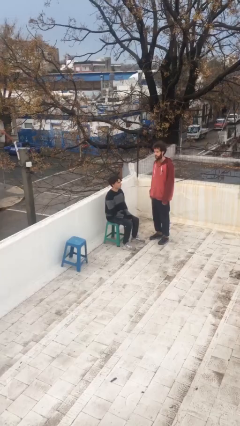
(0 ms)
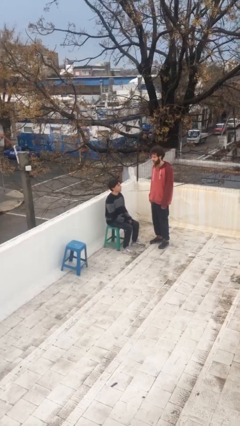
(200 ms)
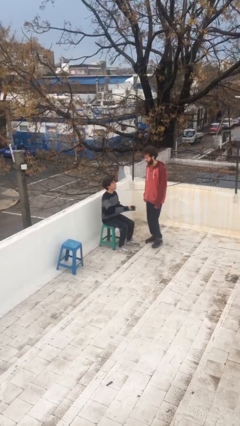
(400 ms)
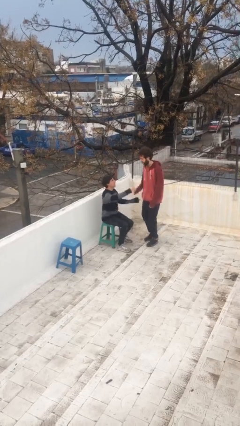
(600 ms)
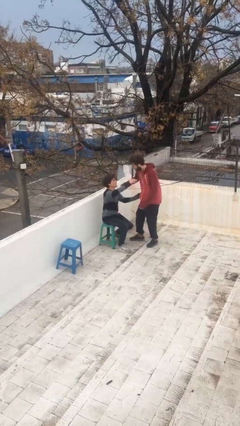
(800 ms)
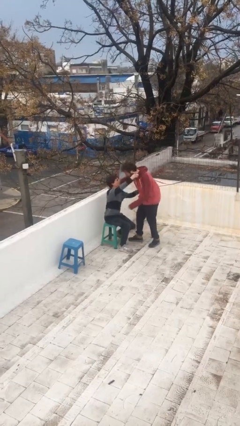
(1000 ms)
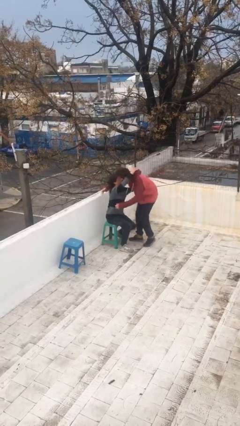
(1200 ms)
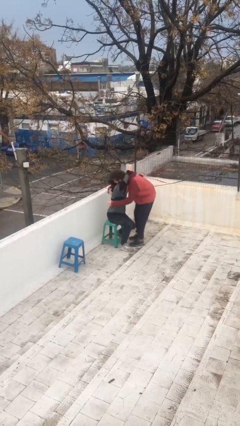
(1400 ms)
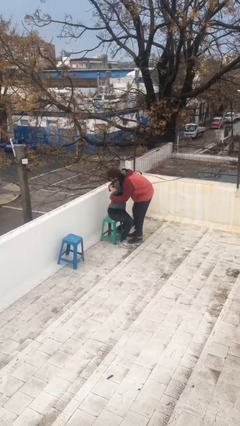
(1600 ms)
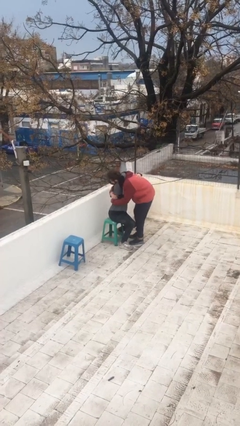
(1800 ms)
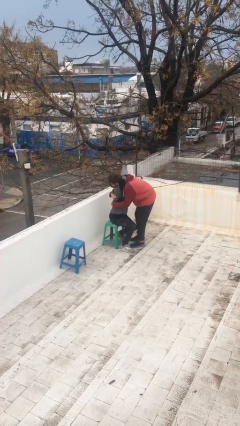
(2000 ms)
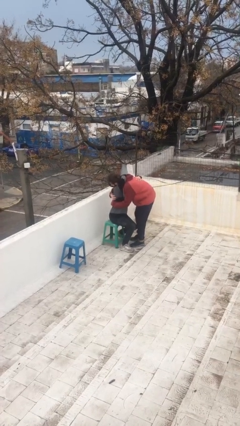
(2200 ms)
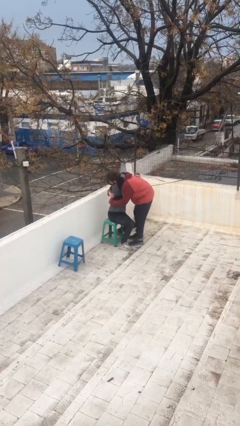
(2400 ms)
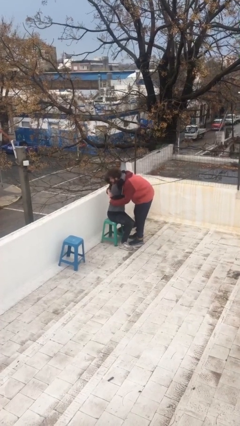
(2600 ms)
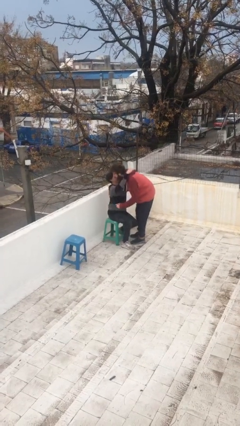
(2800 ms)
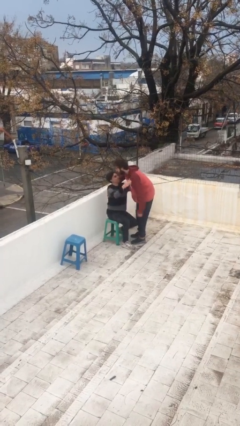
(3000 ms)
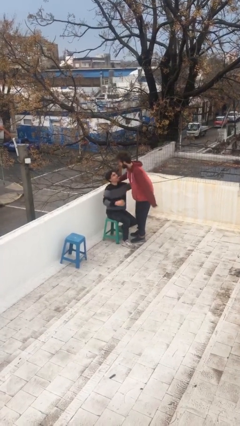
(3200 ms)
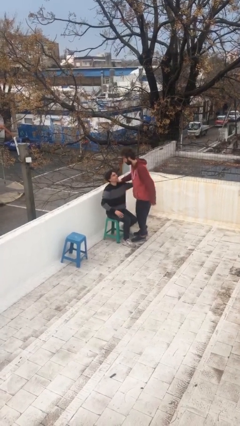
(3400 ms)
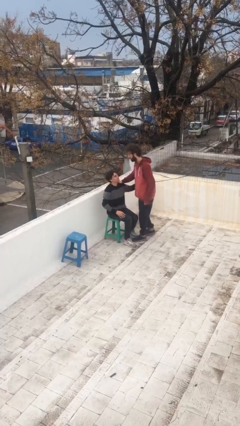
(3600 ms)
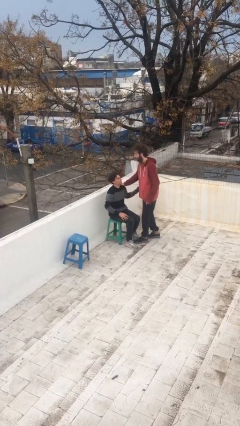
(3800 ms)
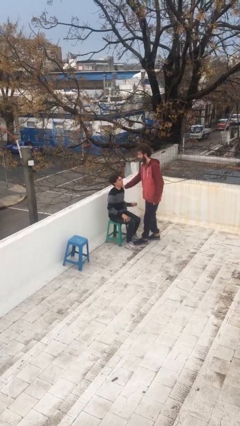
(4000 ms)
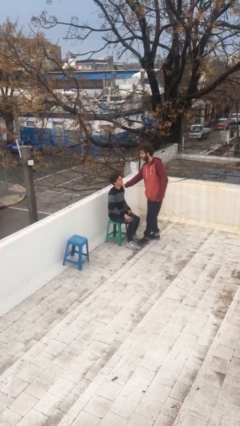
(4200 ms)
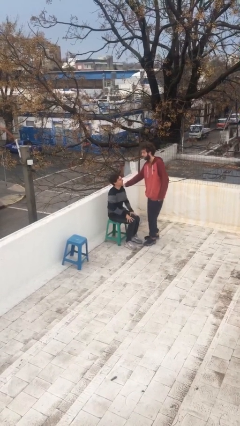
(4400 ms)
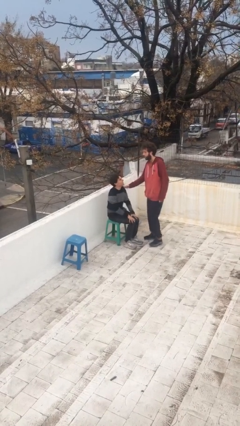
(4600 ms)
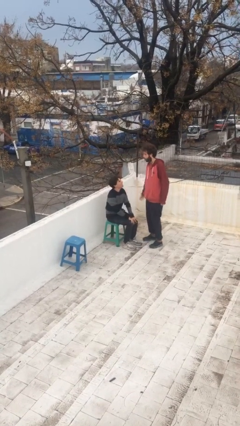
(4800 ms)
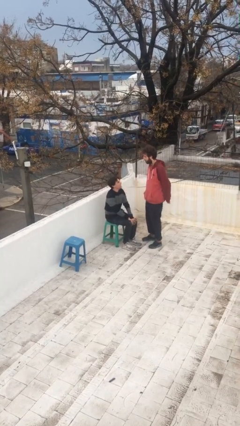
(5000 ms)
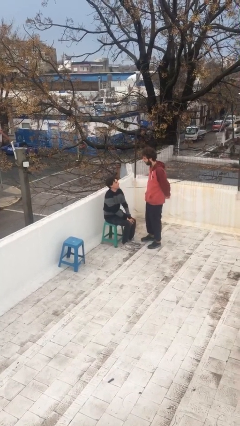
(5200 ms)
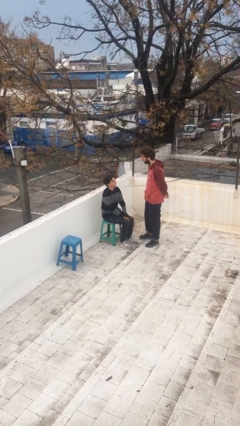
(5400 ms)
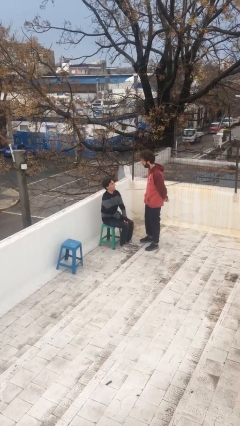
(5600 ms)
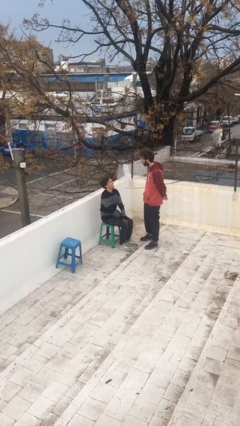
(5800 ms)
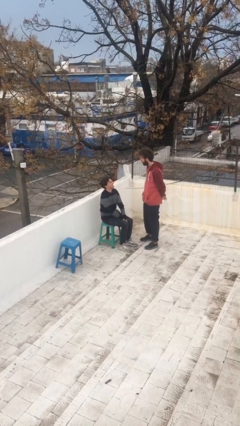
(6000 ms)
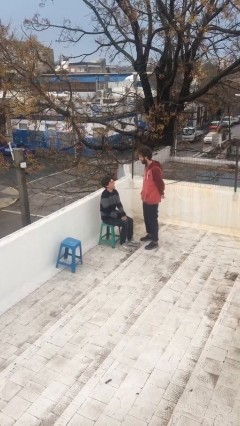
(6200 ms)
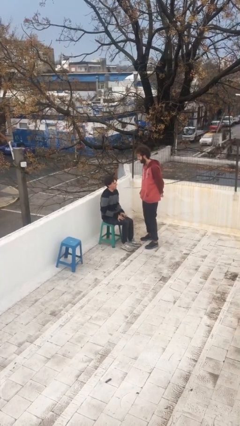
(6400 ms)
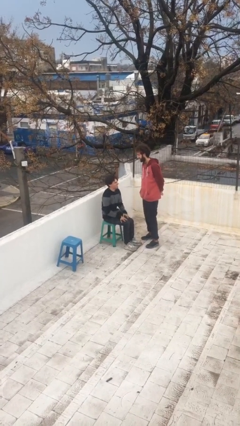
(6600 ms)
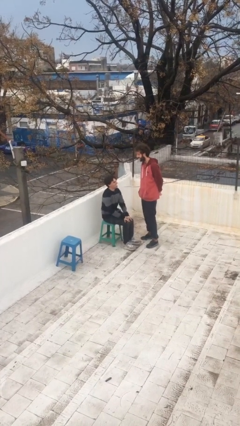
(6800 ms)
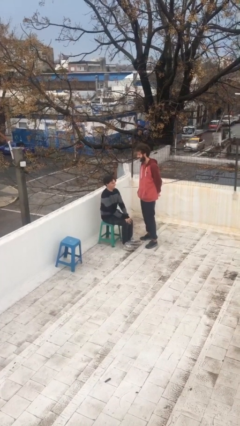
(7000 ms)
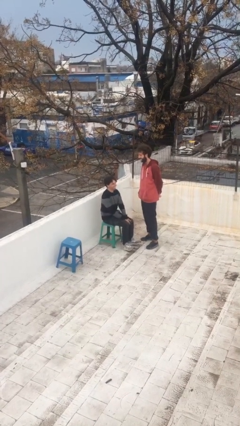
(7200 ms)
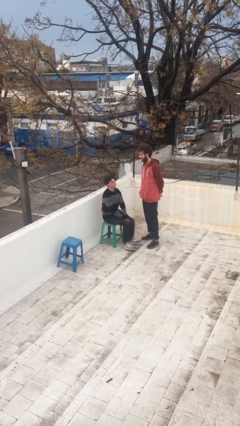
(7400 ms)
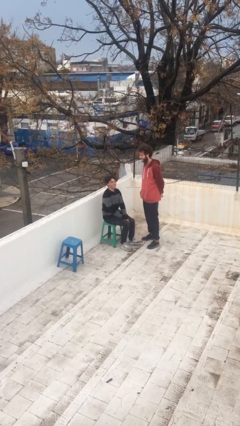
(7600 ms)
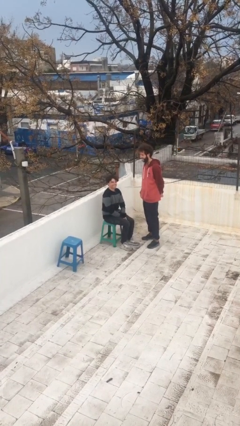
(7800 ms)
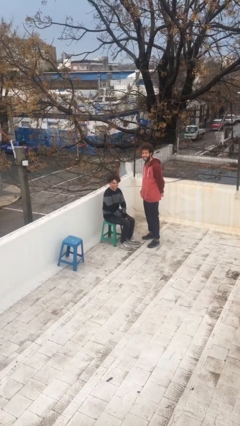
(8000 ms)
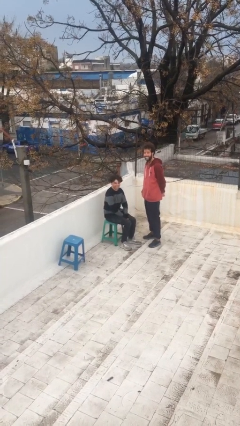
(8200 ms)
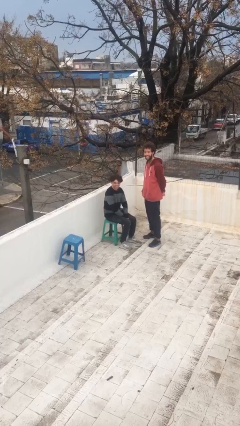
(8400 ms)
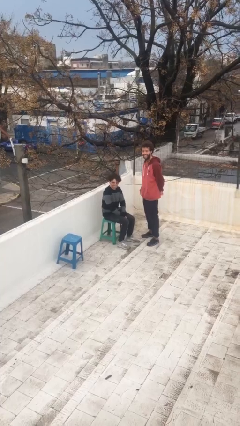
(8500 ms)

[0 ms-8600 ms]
person embraces person

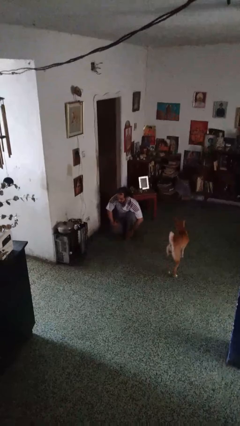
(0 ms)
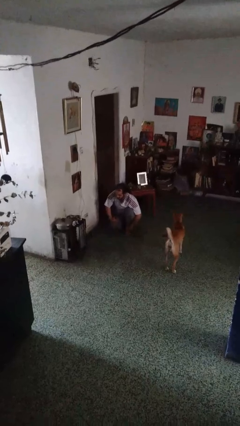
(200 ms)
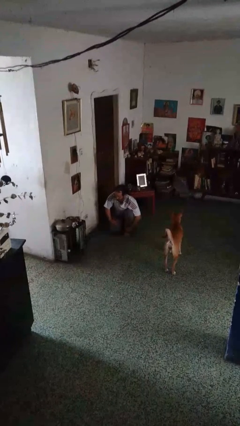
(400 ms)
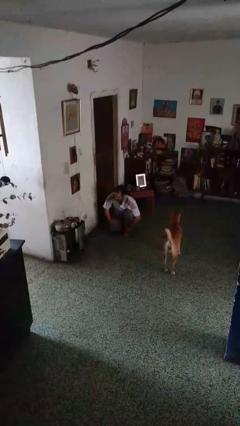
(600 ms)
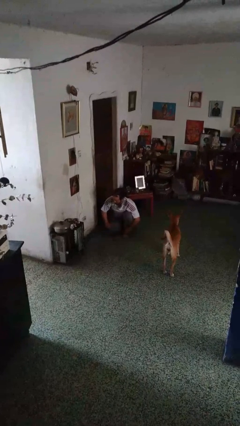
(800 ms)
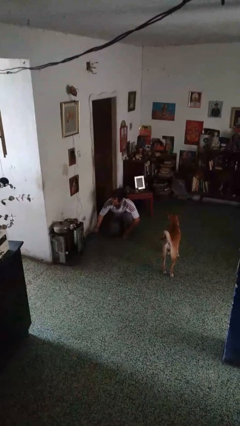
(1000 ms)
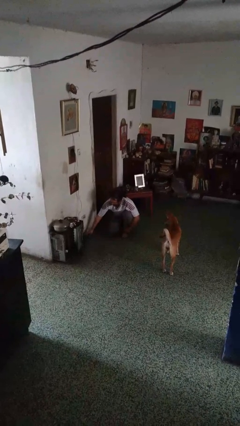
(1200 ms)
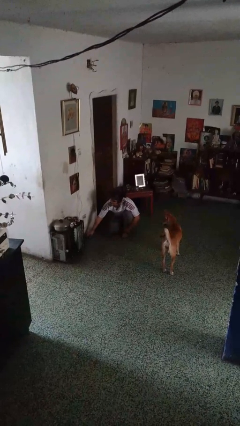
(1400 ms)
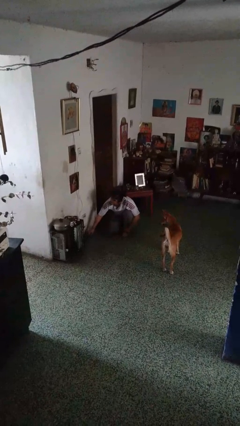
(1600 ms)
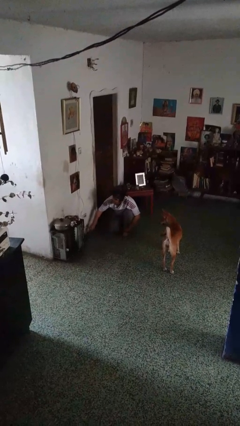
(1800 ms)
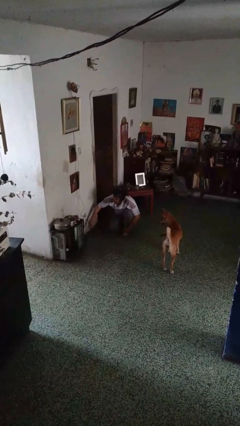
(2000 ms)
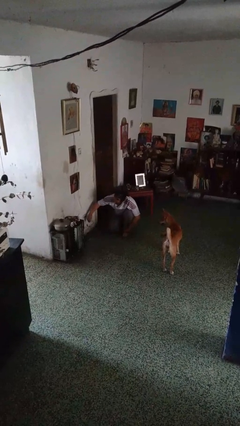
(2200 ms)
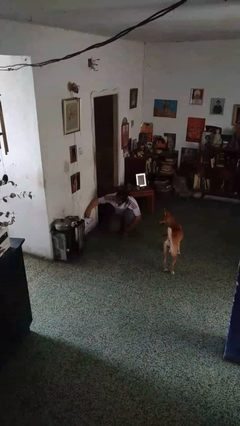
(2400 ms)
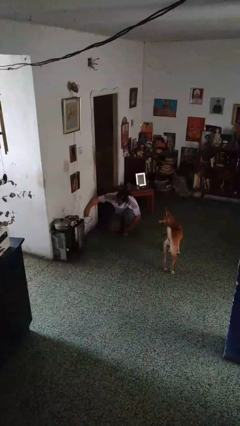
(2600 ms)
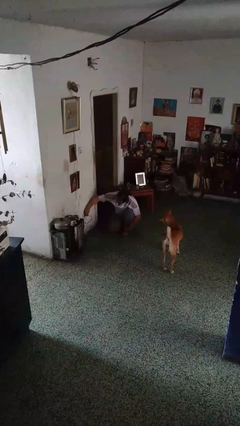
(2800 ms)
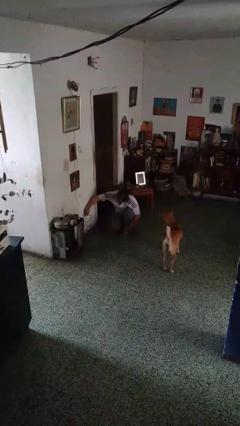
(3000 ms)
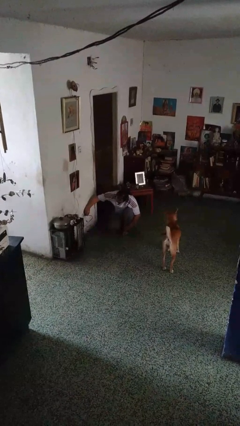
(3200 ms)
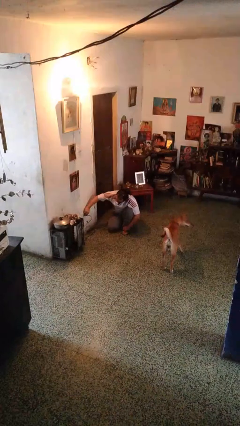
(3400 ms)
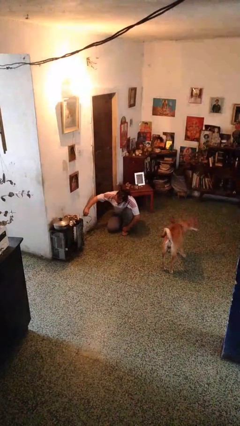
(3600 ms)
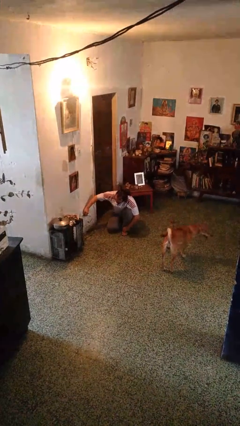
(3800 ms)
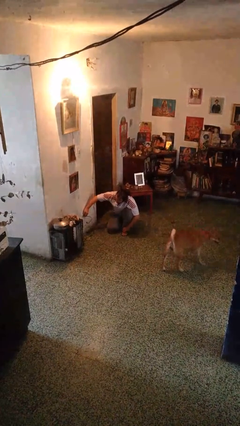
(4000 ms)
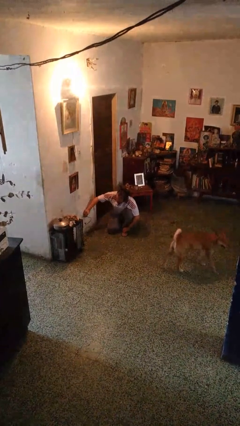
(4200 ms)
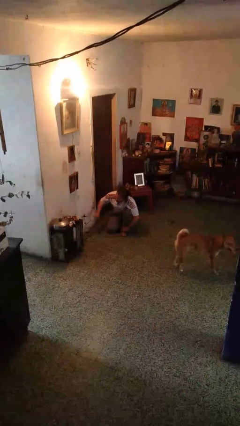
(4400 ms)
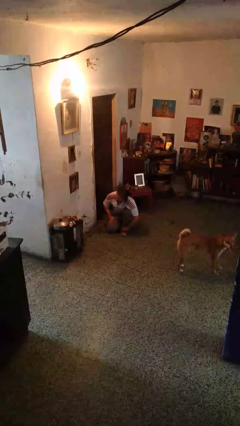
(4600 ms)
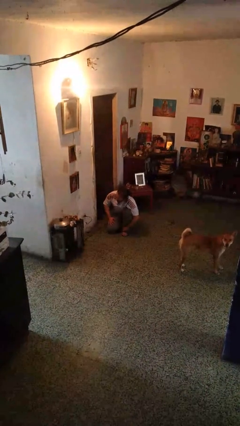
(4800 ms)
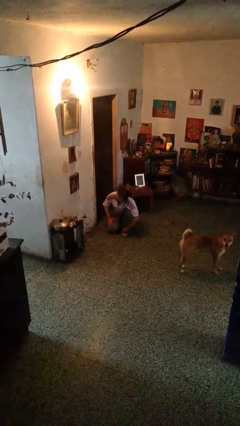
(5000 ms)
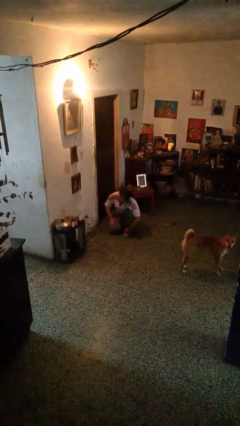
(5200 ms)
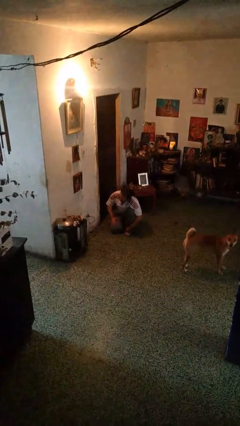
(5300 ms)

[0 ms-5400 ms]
person plugs into electrical socket

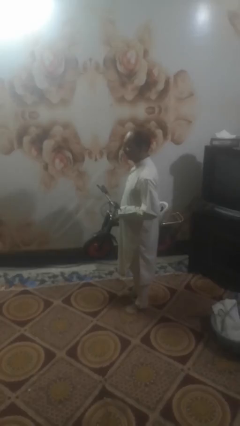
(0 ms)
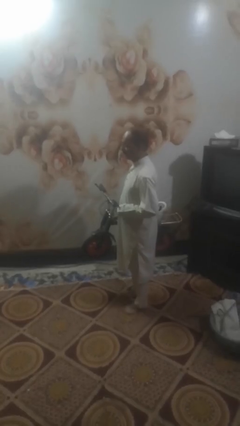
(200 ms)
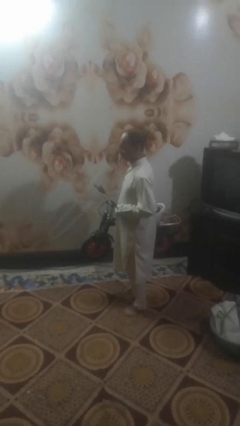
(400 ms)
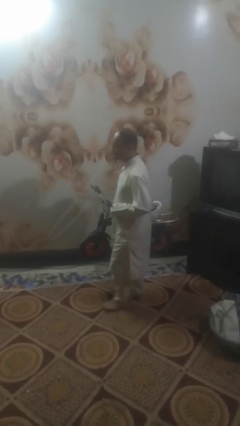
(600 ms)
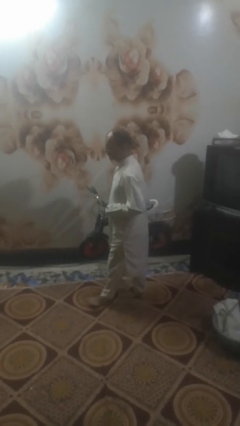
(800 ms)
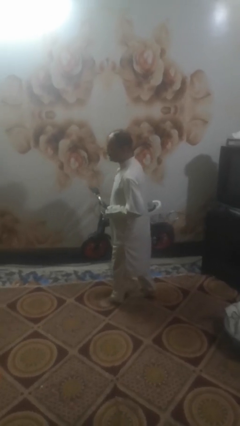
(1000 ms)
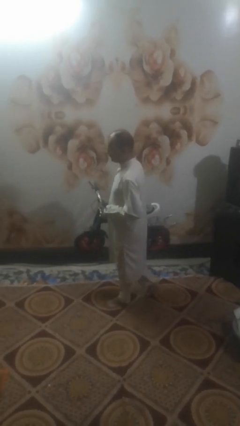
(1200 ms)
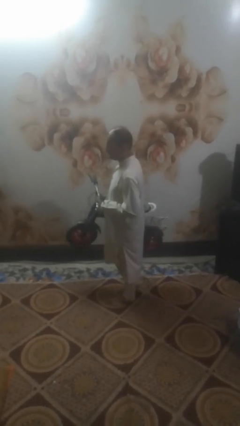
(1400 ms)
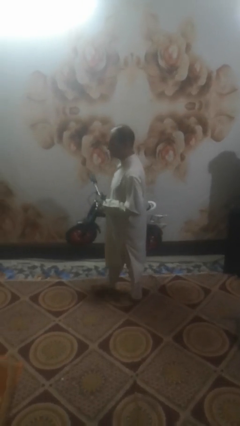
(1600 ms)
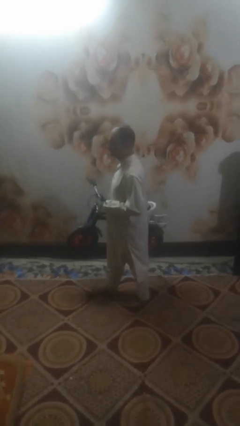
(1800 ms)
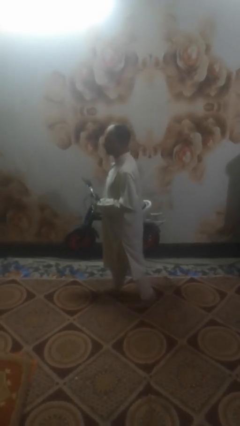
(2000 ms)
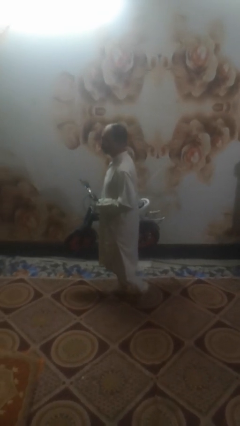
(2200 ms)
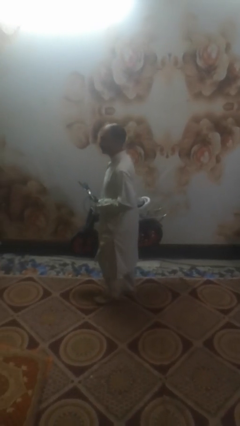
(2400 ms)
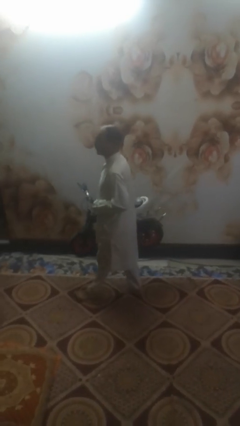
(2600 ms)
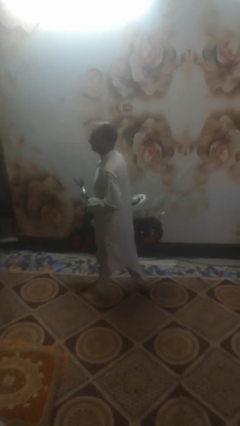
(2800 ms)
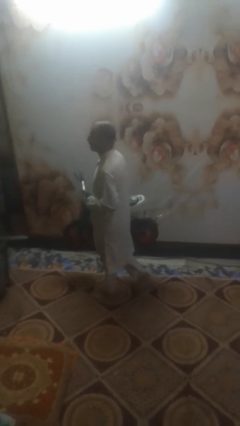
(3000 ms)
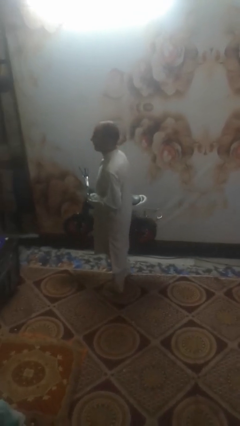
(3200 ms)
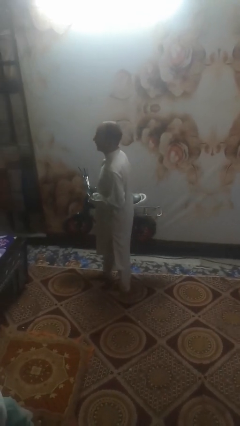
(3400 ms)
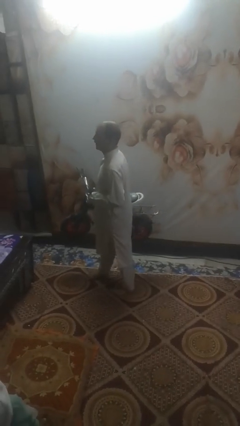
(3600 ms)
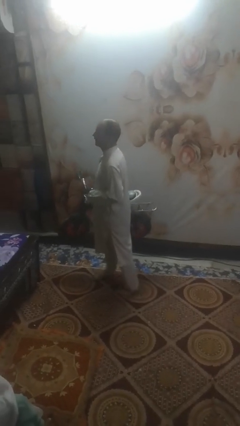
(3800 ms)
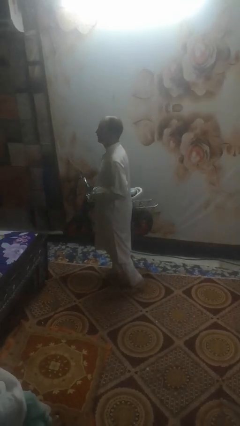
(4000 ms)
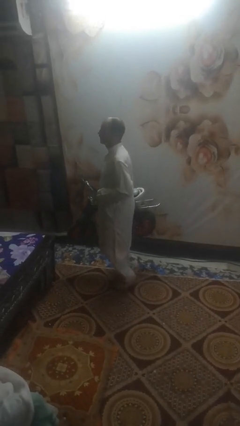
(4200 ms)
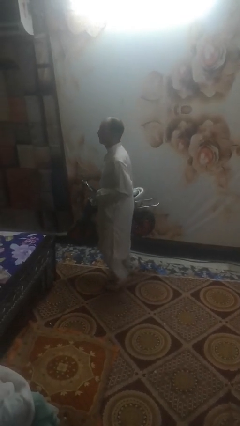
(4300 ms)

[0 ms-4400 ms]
person carries bicycle
